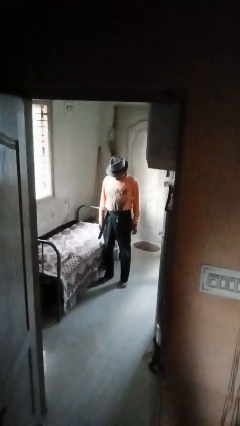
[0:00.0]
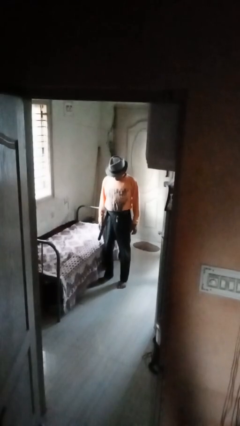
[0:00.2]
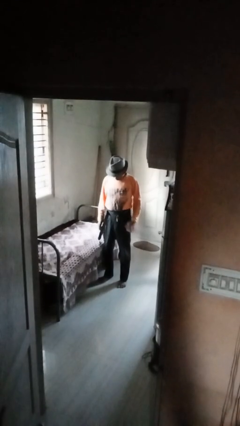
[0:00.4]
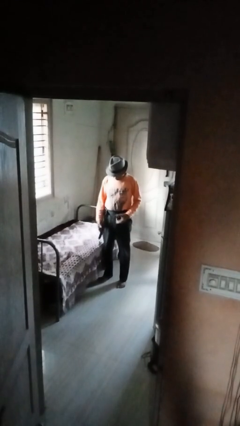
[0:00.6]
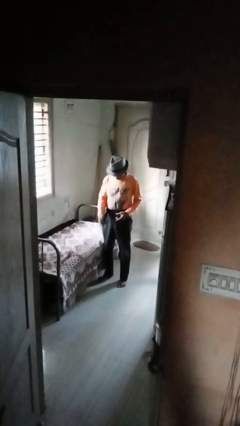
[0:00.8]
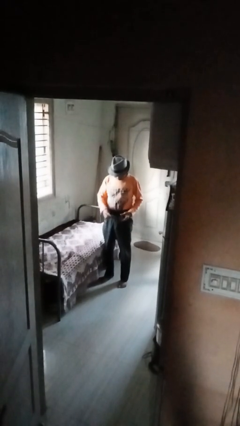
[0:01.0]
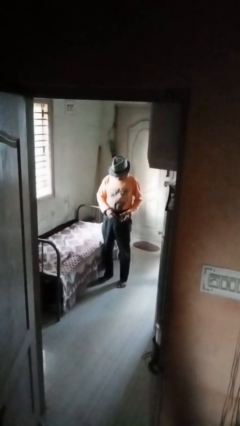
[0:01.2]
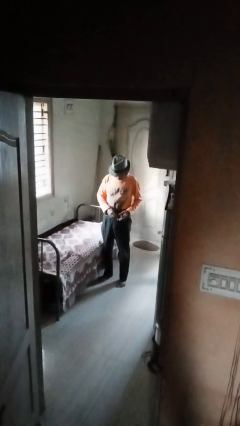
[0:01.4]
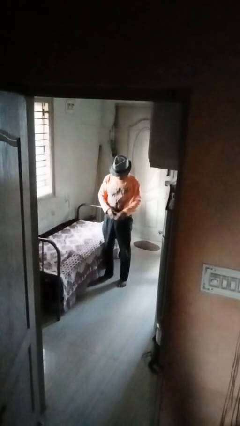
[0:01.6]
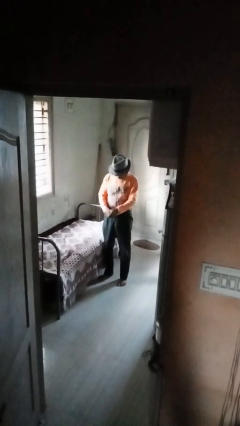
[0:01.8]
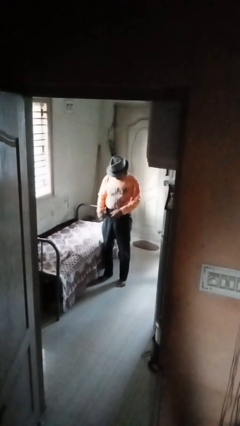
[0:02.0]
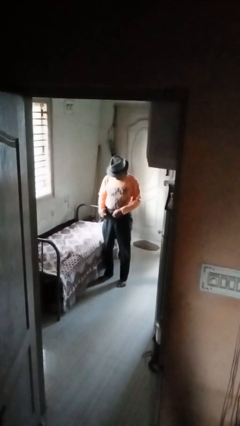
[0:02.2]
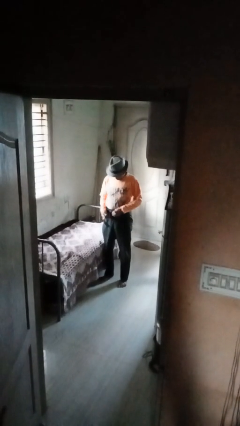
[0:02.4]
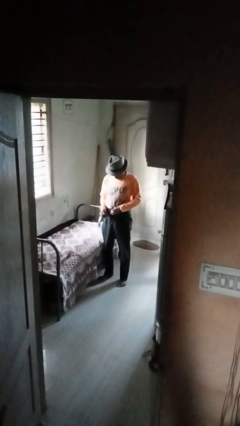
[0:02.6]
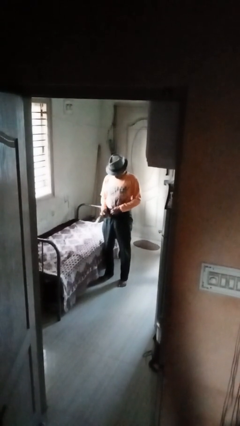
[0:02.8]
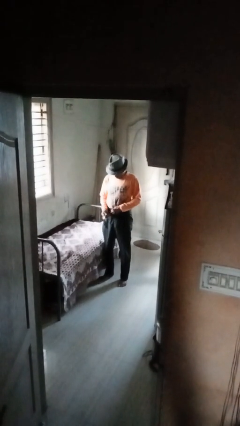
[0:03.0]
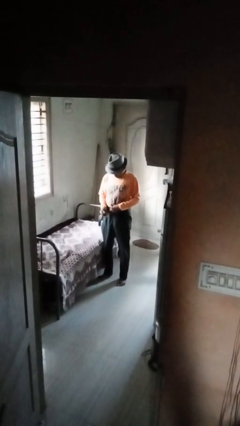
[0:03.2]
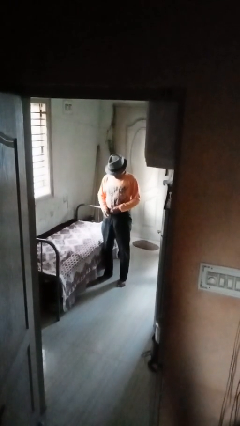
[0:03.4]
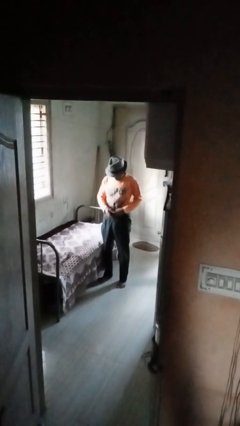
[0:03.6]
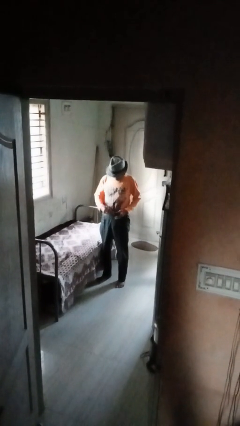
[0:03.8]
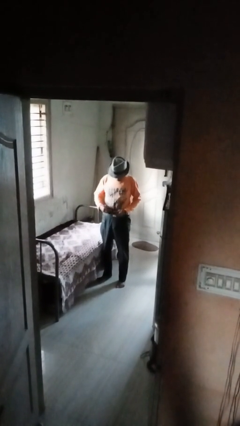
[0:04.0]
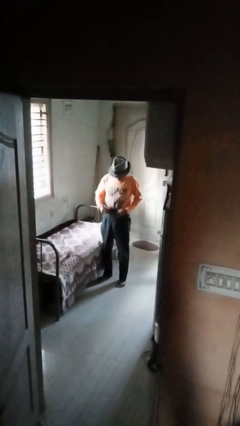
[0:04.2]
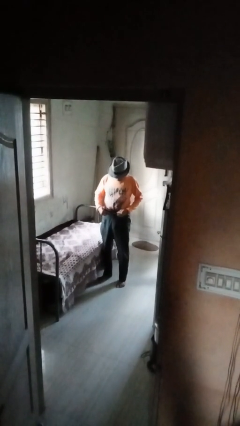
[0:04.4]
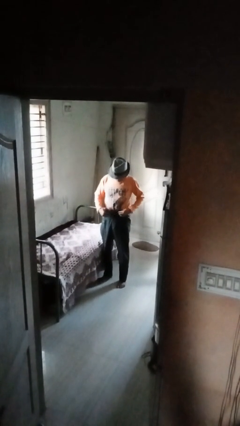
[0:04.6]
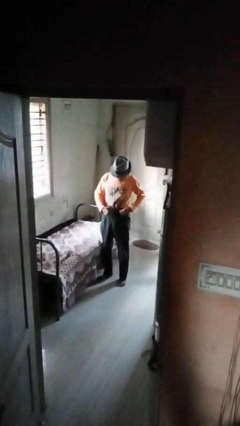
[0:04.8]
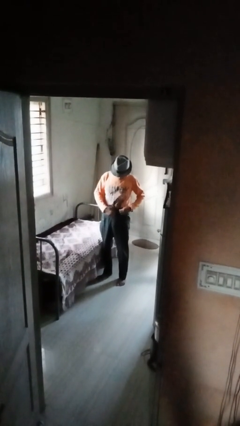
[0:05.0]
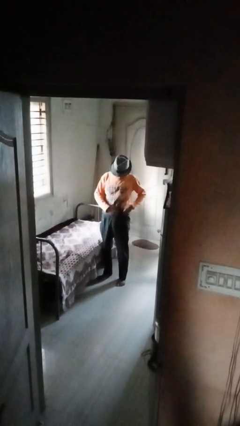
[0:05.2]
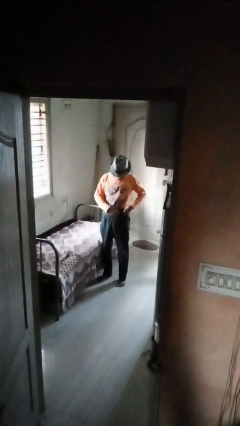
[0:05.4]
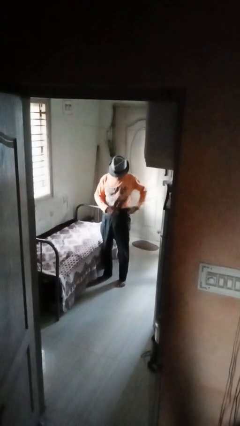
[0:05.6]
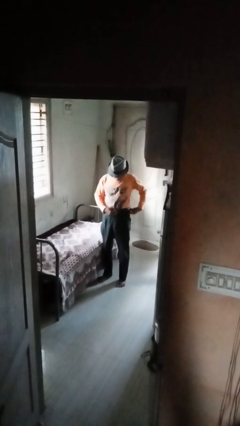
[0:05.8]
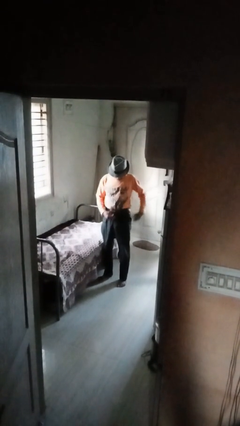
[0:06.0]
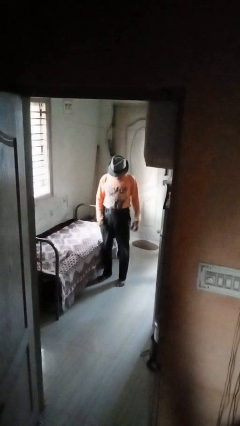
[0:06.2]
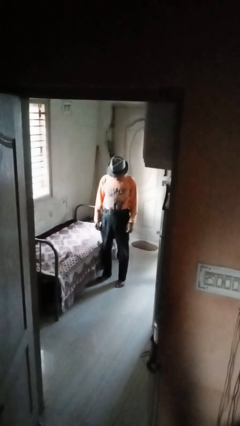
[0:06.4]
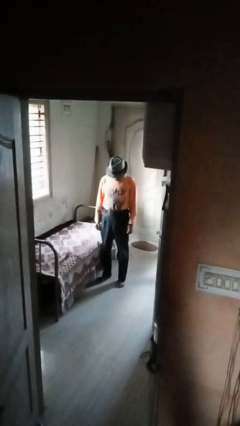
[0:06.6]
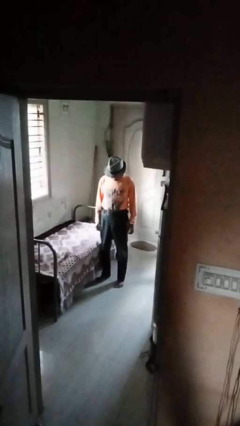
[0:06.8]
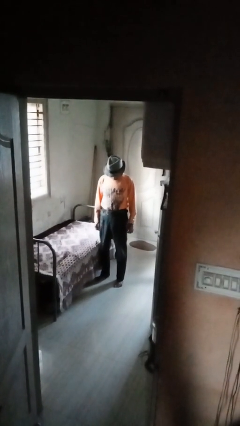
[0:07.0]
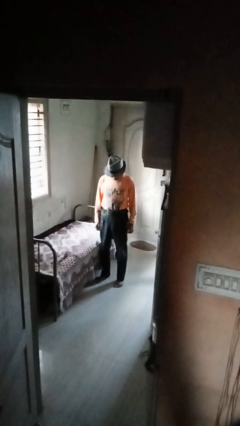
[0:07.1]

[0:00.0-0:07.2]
person puts on belt

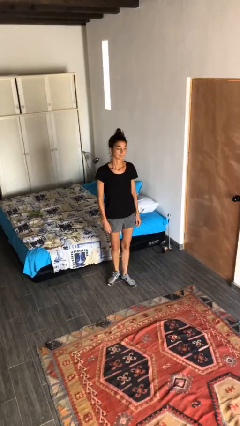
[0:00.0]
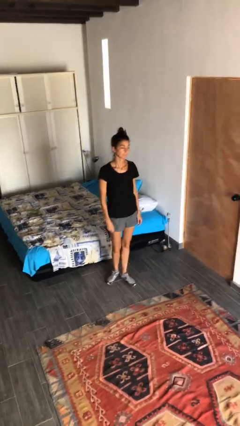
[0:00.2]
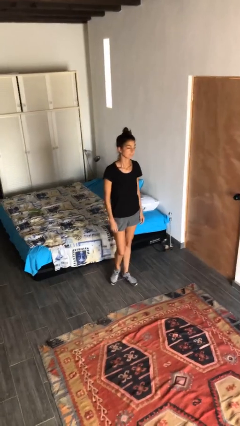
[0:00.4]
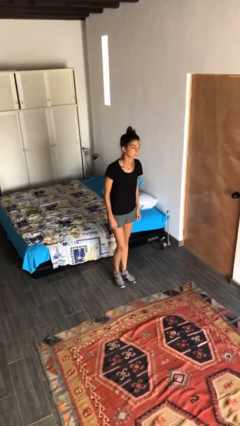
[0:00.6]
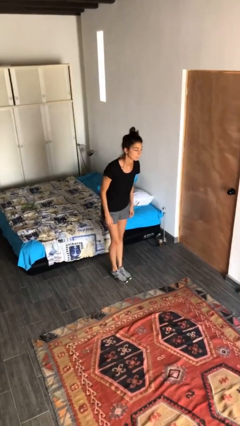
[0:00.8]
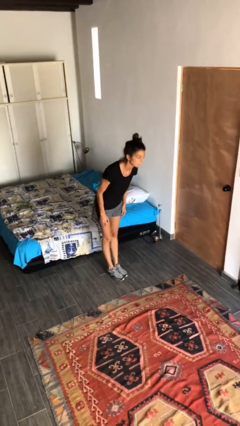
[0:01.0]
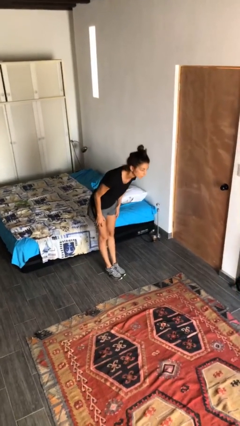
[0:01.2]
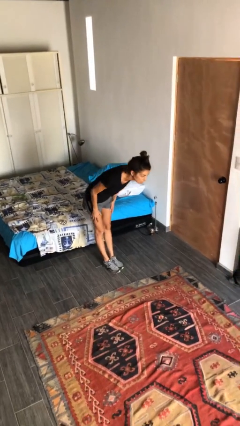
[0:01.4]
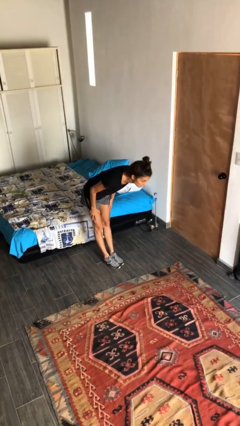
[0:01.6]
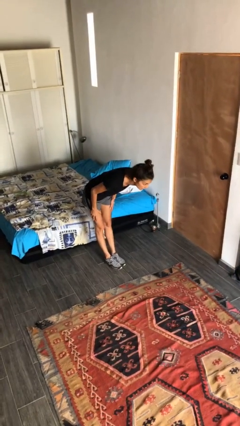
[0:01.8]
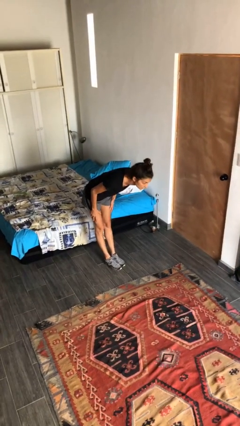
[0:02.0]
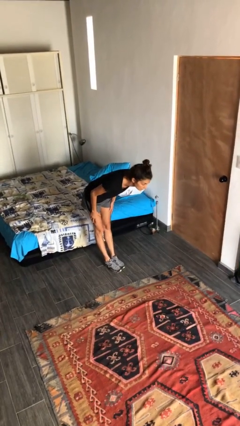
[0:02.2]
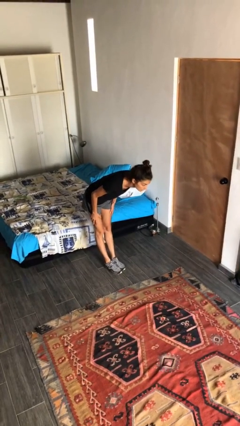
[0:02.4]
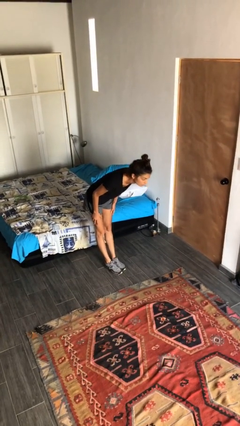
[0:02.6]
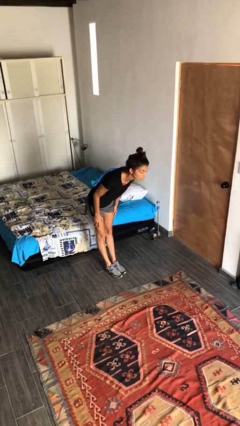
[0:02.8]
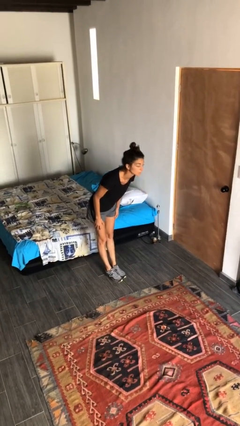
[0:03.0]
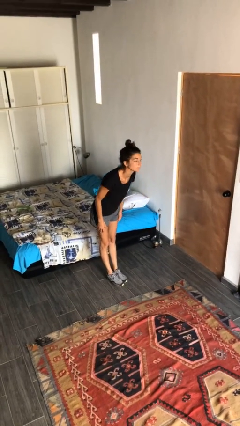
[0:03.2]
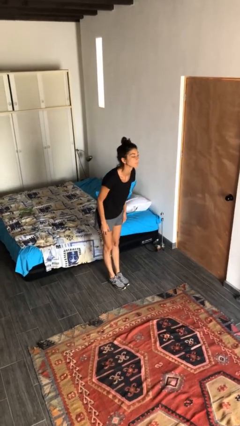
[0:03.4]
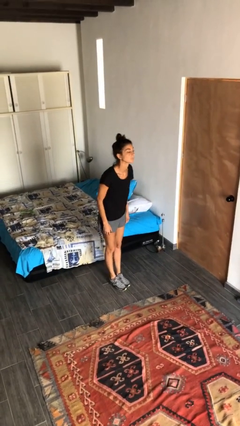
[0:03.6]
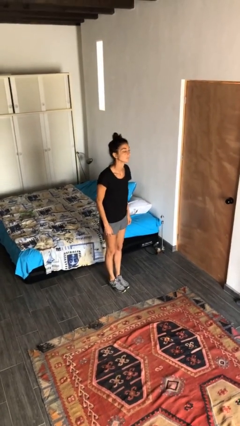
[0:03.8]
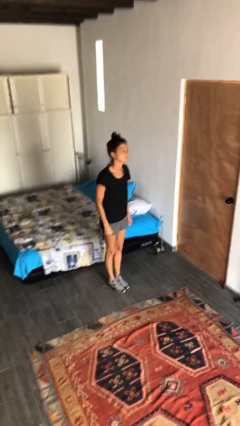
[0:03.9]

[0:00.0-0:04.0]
person bows

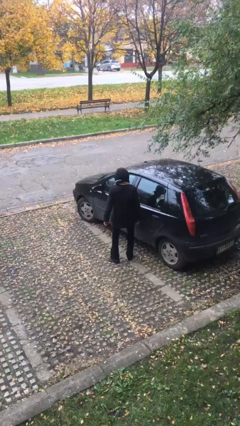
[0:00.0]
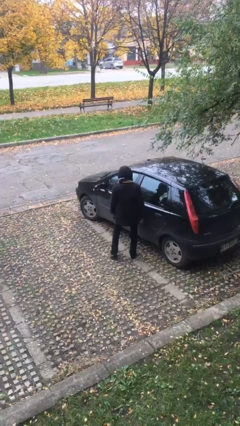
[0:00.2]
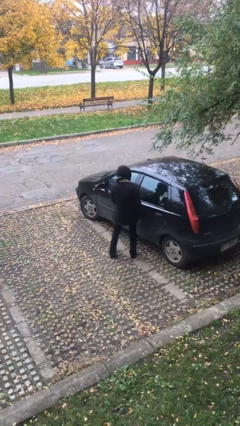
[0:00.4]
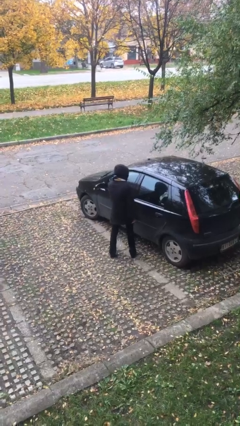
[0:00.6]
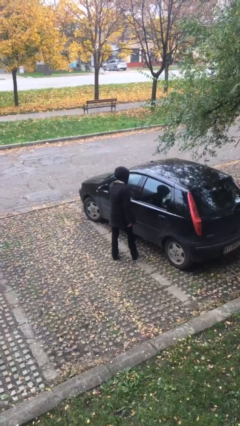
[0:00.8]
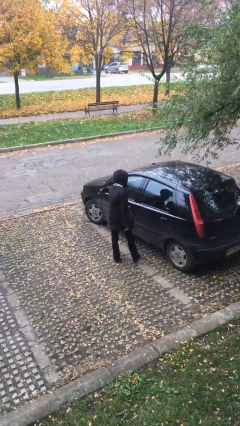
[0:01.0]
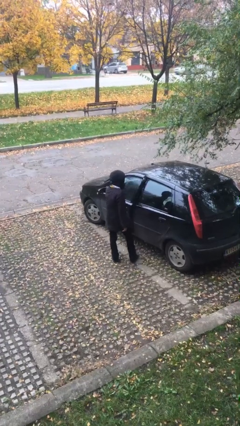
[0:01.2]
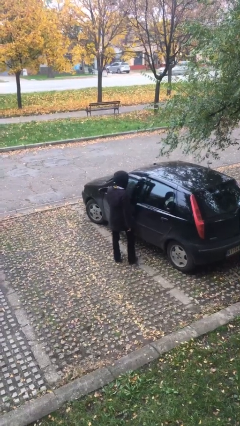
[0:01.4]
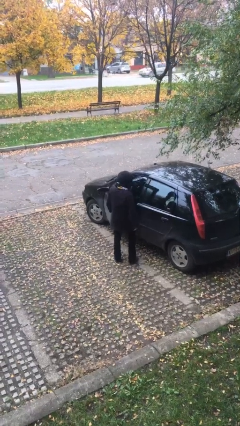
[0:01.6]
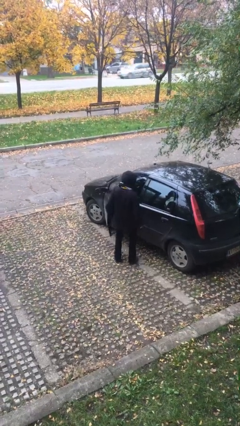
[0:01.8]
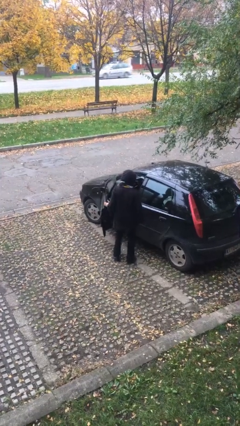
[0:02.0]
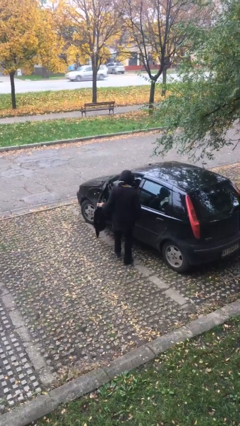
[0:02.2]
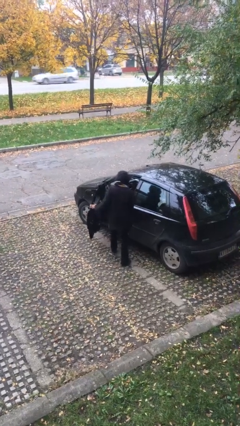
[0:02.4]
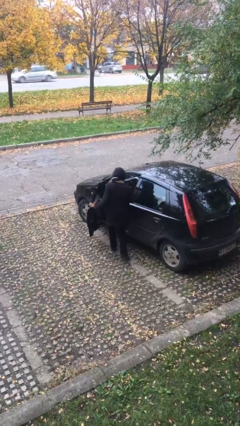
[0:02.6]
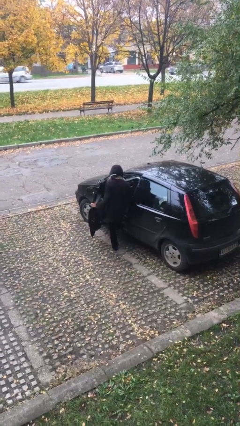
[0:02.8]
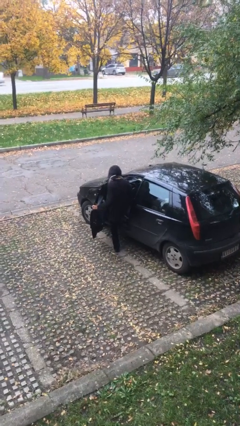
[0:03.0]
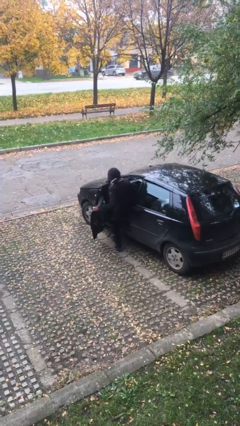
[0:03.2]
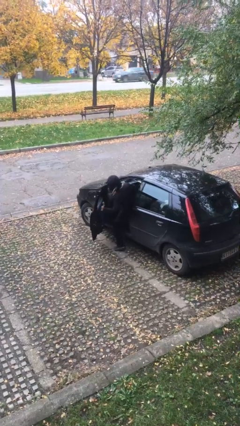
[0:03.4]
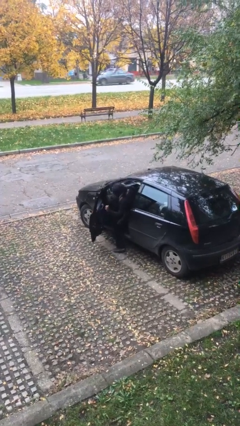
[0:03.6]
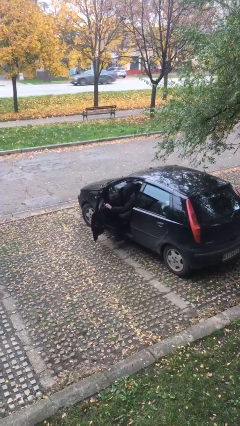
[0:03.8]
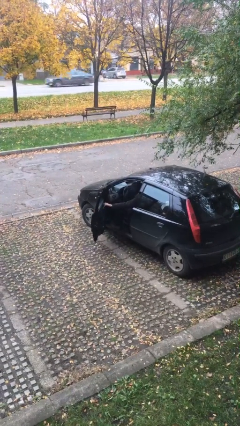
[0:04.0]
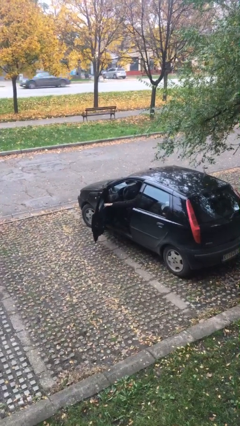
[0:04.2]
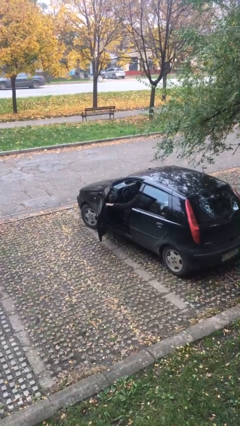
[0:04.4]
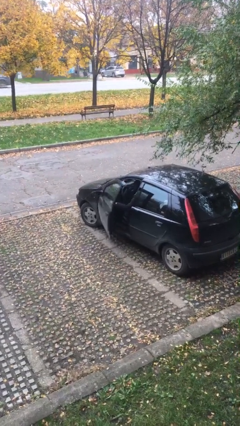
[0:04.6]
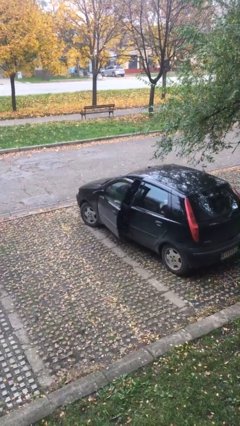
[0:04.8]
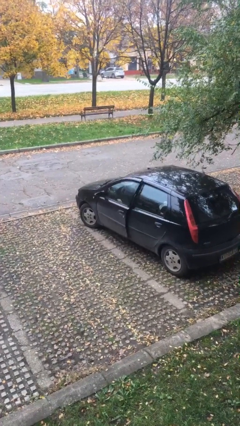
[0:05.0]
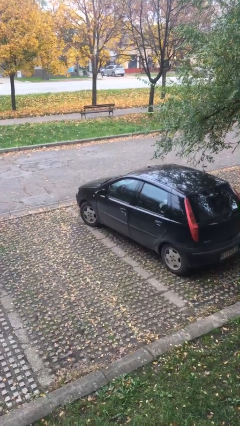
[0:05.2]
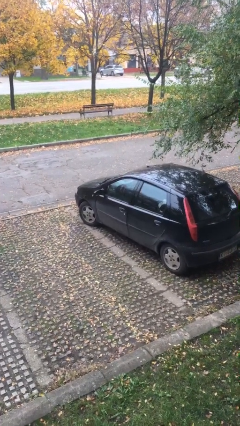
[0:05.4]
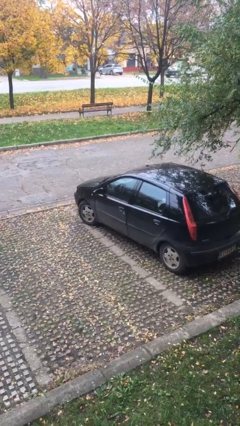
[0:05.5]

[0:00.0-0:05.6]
person enters car

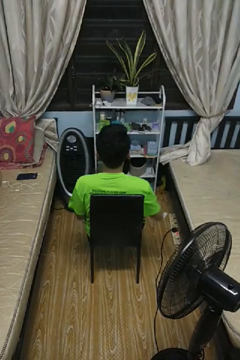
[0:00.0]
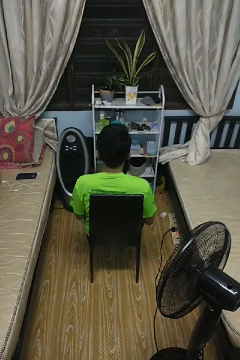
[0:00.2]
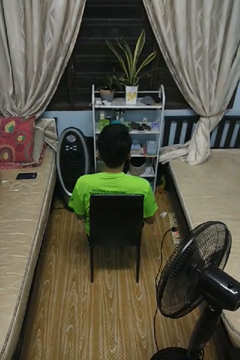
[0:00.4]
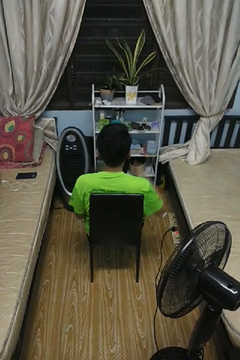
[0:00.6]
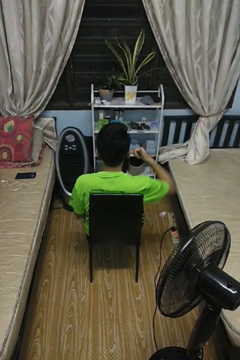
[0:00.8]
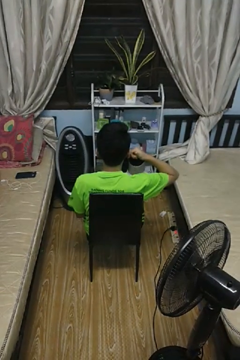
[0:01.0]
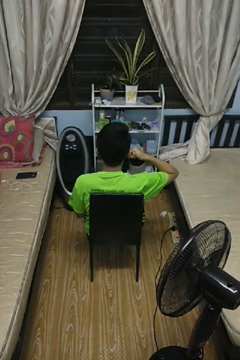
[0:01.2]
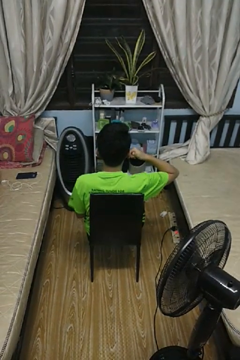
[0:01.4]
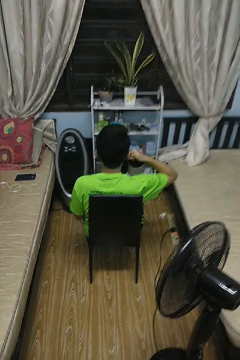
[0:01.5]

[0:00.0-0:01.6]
person gestures call me
